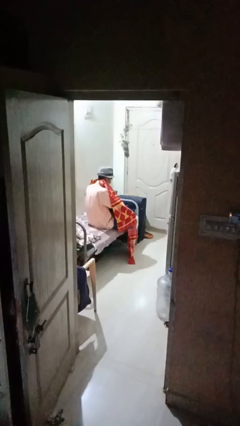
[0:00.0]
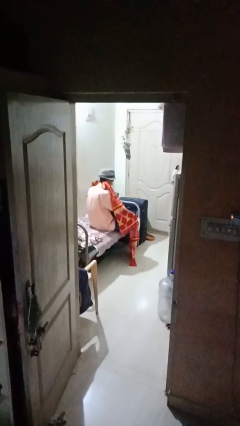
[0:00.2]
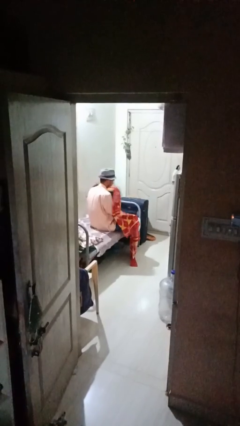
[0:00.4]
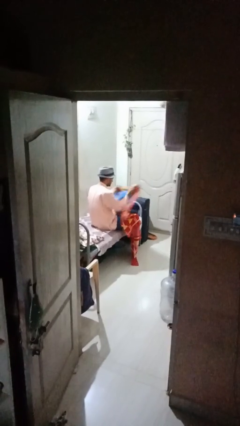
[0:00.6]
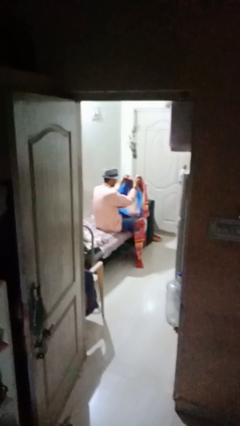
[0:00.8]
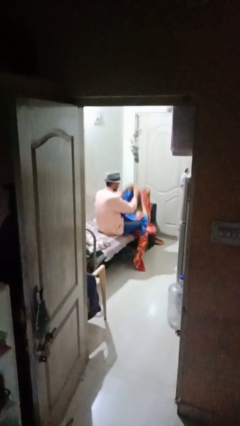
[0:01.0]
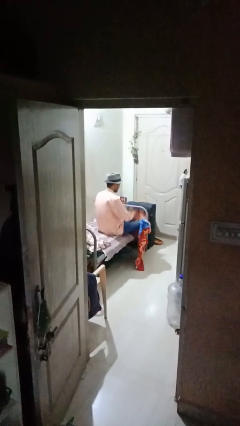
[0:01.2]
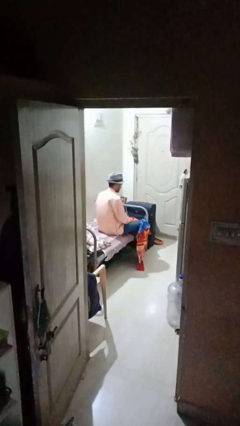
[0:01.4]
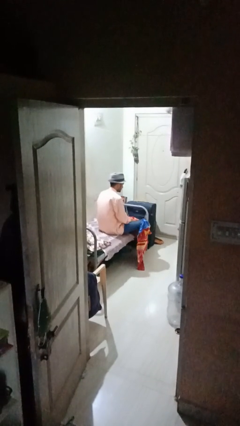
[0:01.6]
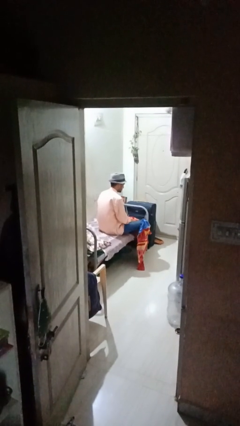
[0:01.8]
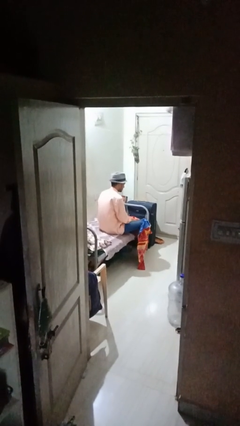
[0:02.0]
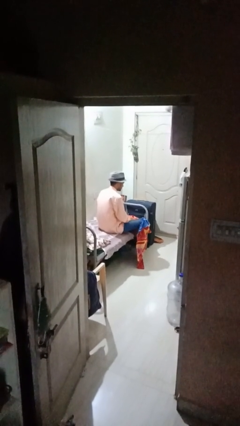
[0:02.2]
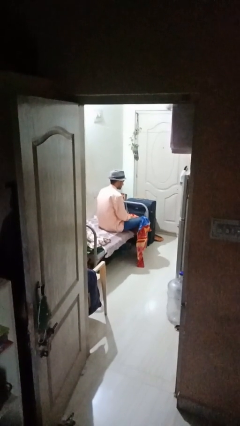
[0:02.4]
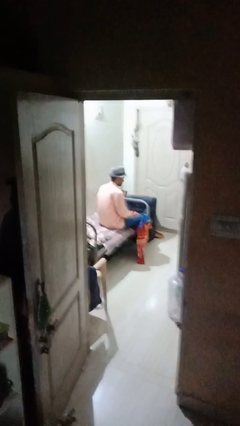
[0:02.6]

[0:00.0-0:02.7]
person uncovers with blanket

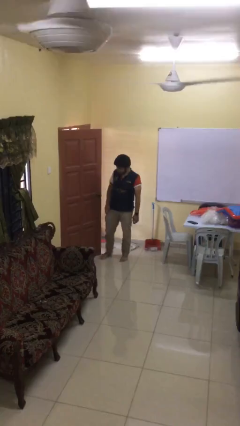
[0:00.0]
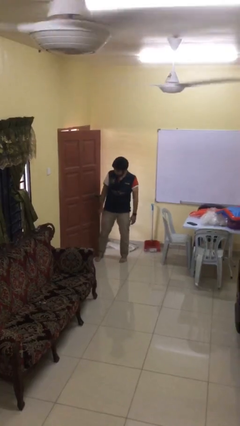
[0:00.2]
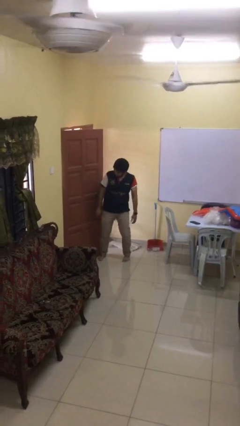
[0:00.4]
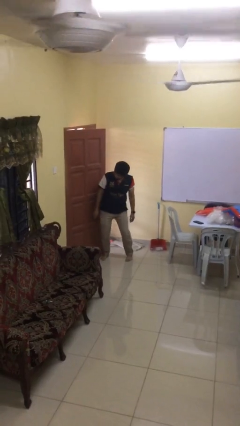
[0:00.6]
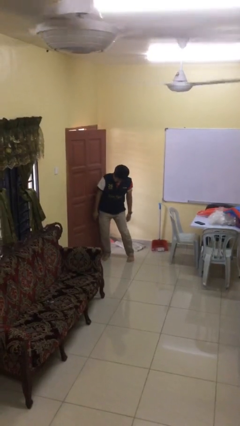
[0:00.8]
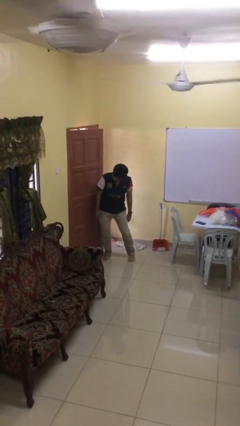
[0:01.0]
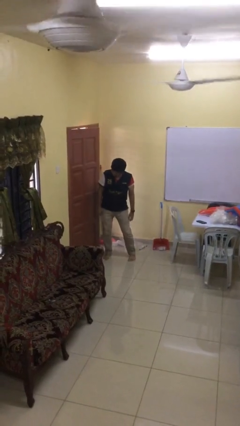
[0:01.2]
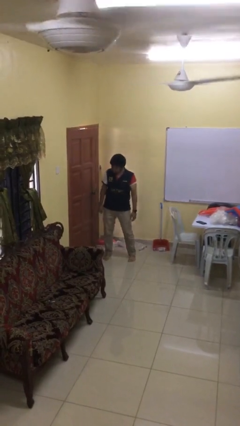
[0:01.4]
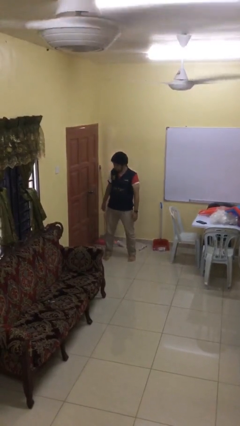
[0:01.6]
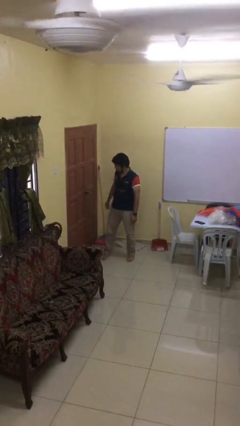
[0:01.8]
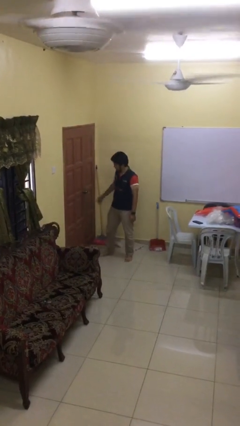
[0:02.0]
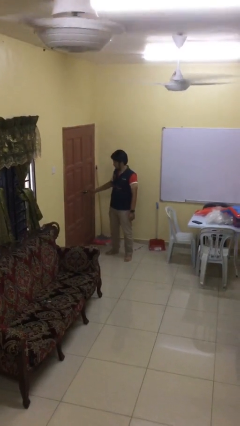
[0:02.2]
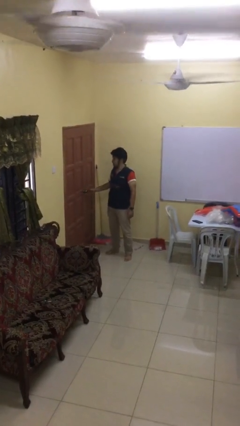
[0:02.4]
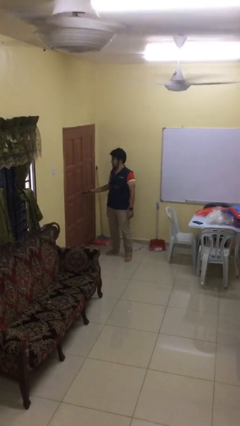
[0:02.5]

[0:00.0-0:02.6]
person closes door with hip

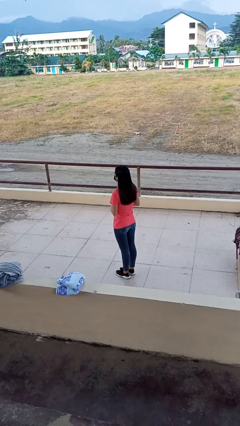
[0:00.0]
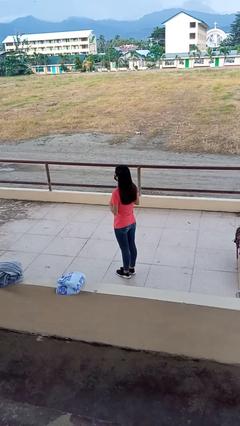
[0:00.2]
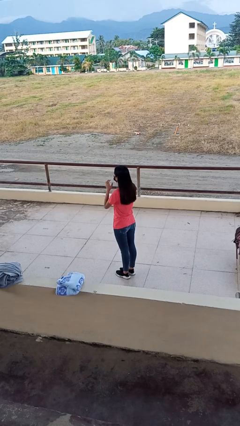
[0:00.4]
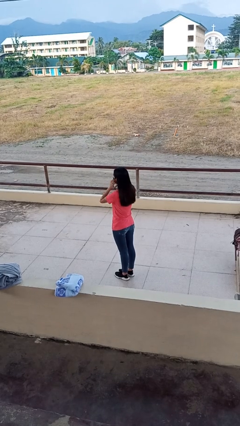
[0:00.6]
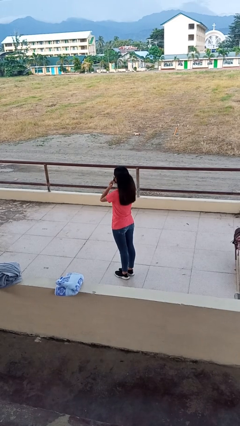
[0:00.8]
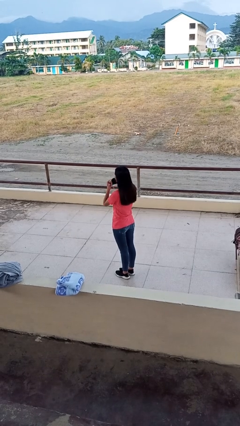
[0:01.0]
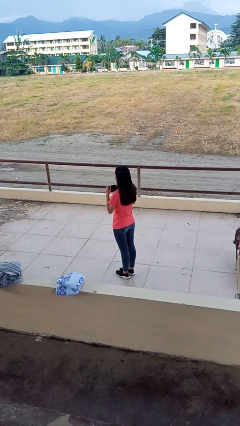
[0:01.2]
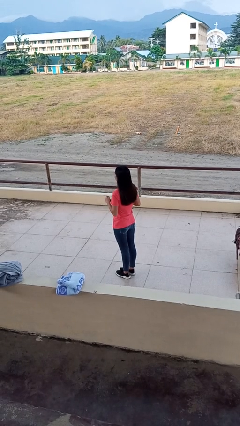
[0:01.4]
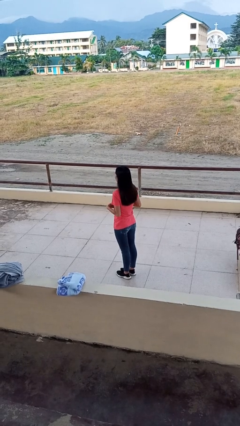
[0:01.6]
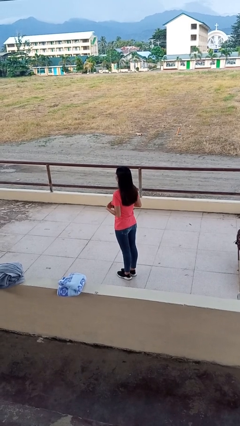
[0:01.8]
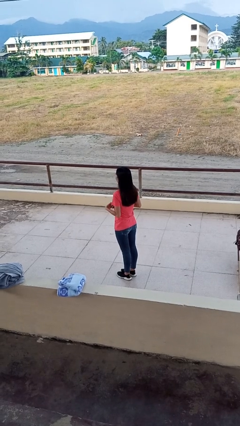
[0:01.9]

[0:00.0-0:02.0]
person takes off facemask

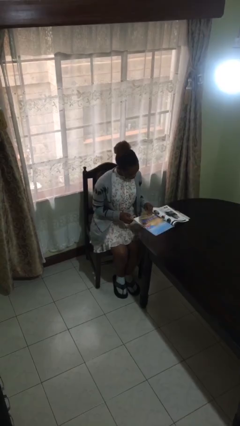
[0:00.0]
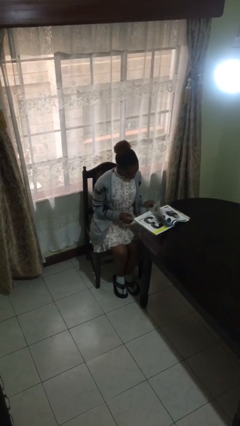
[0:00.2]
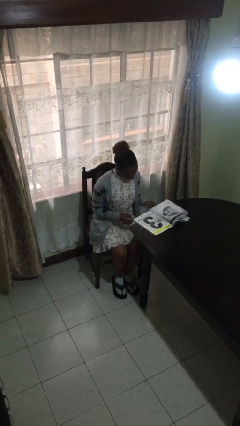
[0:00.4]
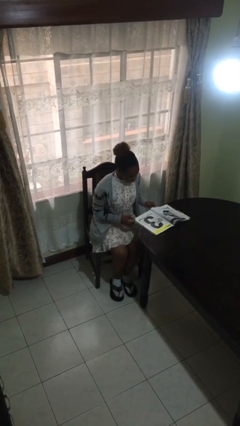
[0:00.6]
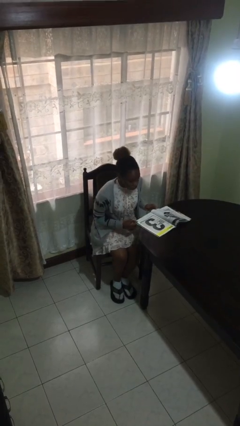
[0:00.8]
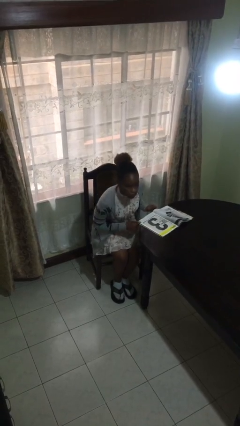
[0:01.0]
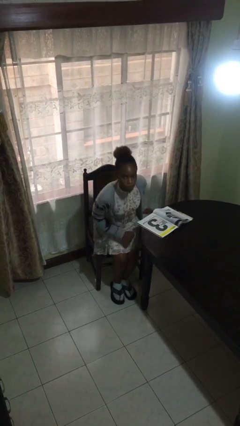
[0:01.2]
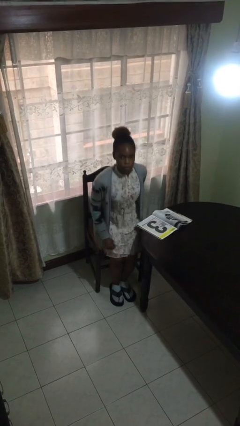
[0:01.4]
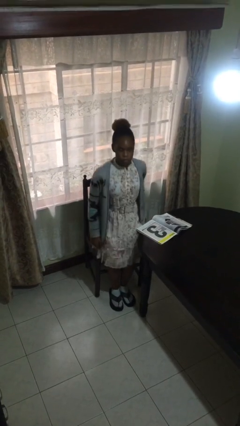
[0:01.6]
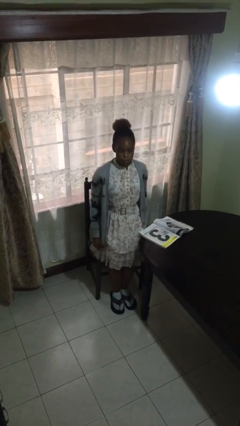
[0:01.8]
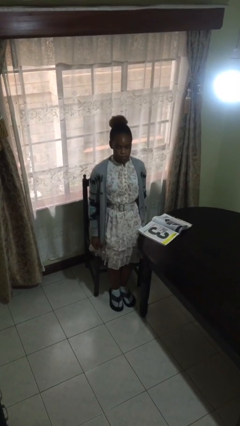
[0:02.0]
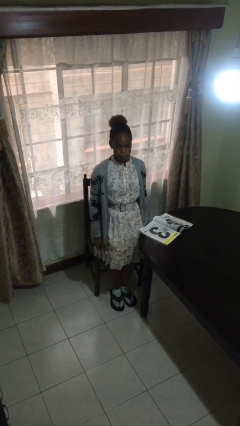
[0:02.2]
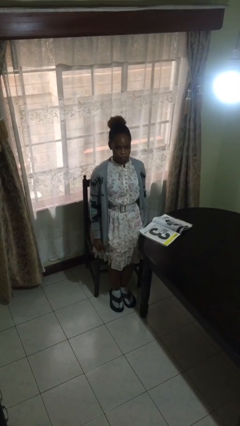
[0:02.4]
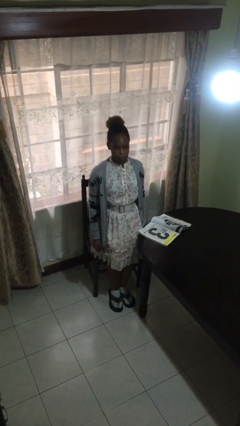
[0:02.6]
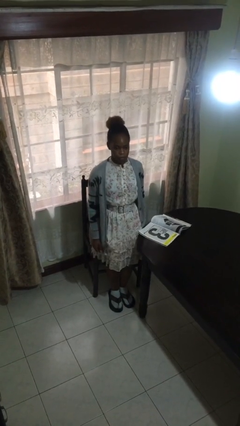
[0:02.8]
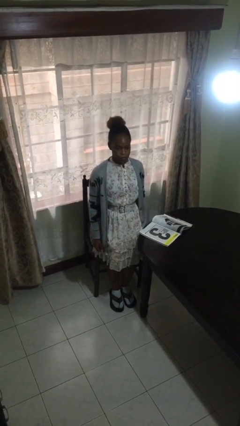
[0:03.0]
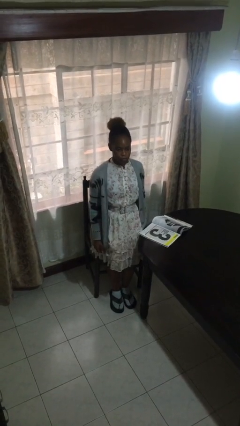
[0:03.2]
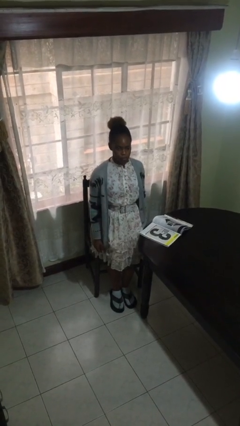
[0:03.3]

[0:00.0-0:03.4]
person stands up

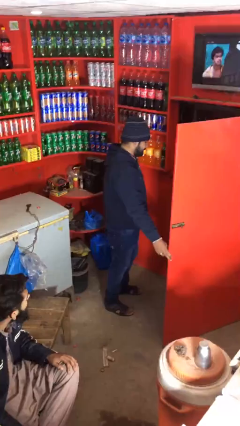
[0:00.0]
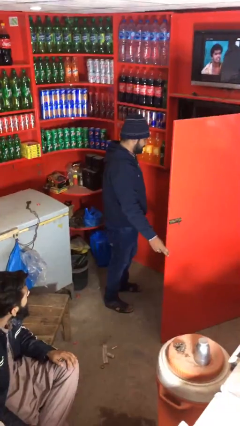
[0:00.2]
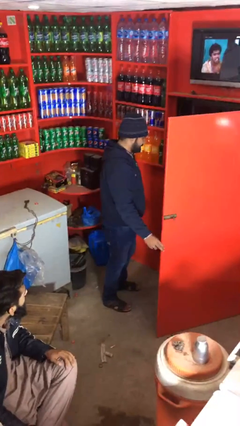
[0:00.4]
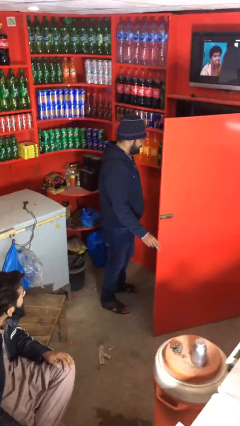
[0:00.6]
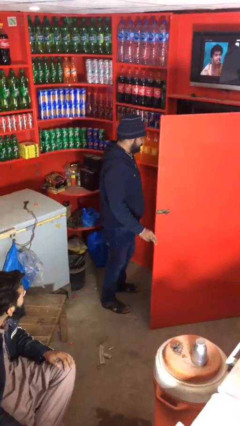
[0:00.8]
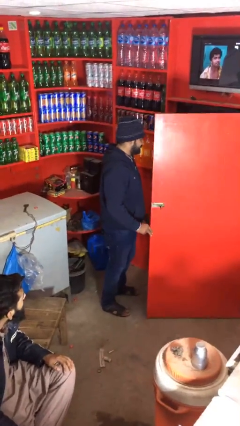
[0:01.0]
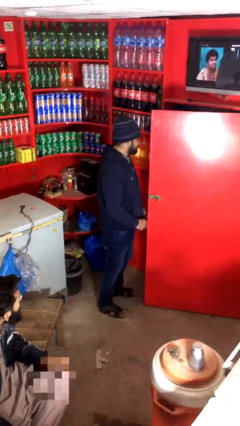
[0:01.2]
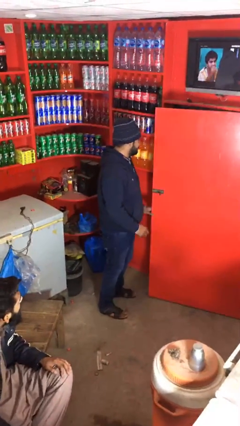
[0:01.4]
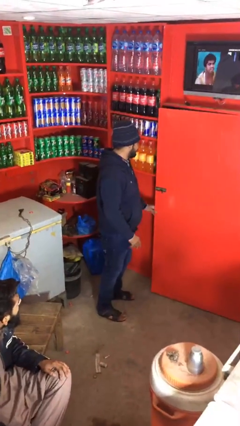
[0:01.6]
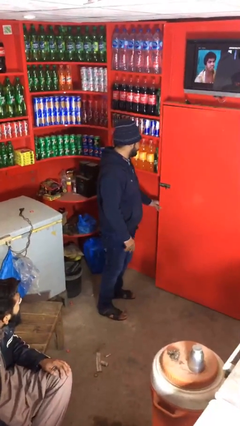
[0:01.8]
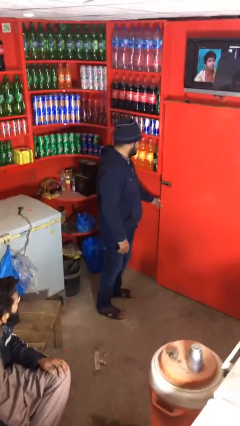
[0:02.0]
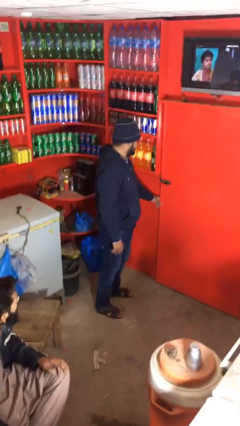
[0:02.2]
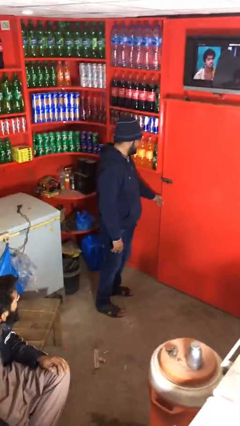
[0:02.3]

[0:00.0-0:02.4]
person closes facility door

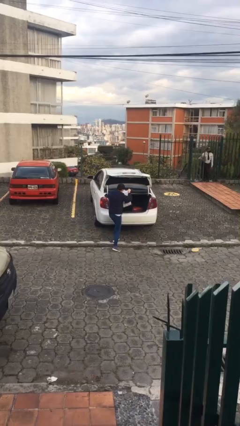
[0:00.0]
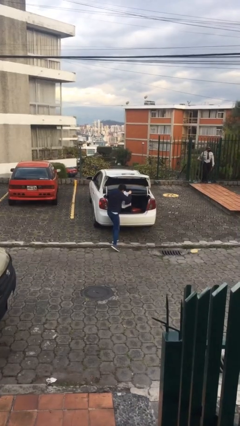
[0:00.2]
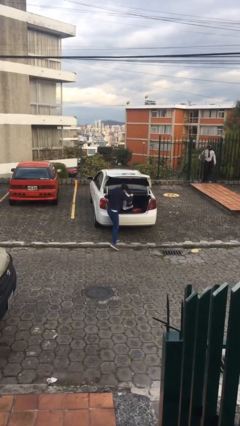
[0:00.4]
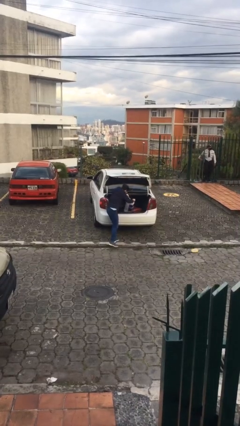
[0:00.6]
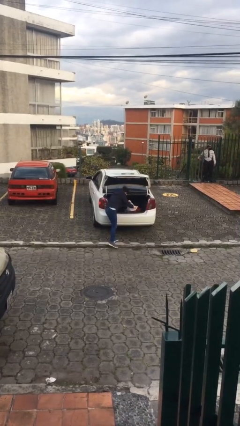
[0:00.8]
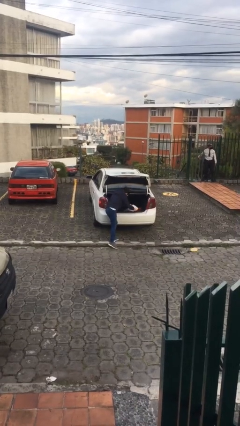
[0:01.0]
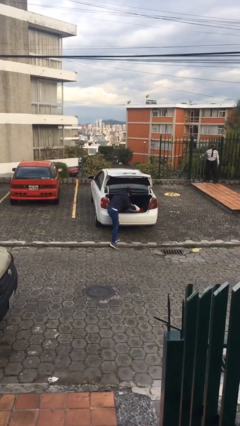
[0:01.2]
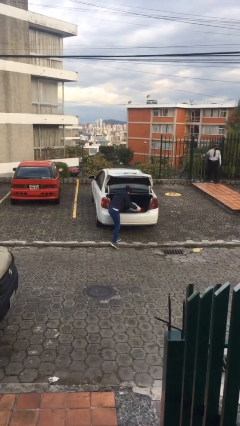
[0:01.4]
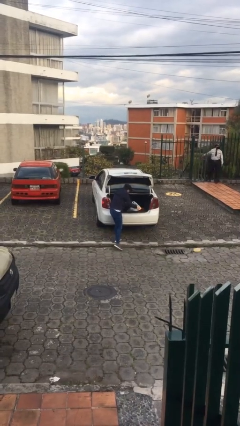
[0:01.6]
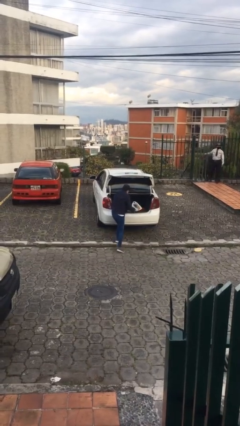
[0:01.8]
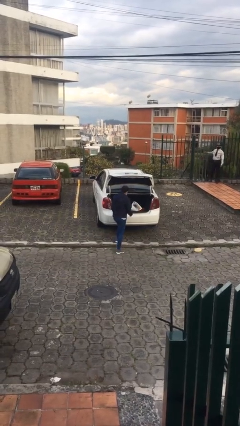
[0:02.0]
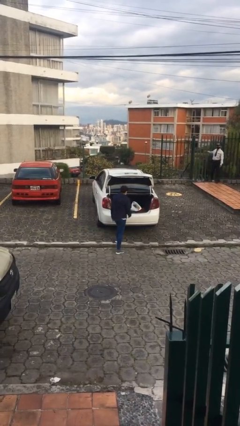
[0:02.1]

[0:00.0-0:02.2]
person loads car

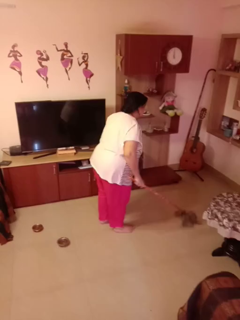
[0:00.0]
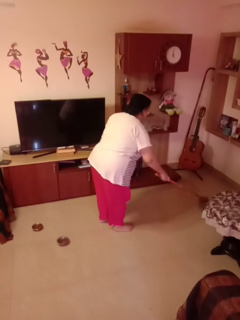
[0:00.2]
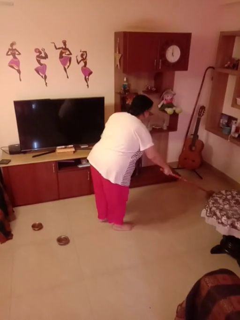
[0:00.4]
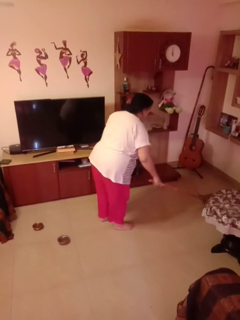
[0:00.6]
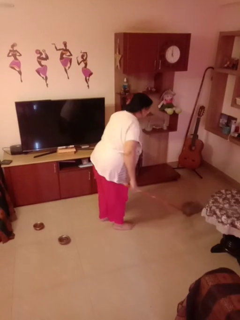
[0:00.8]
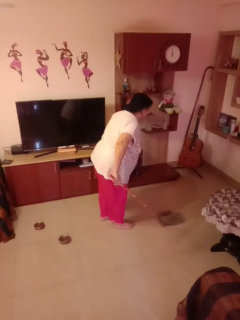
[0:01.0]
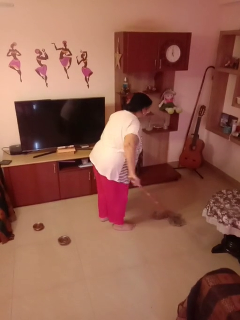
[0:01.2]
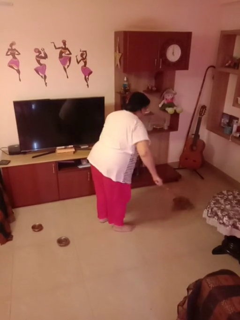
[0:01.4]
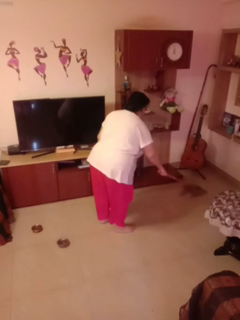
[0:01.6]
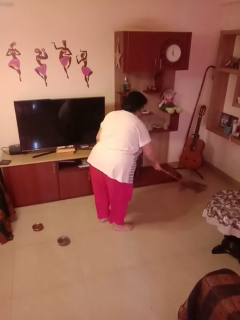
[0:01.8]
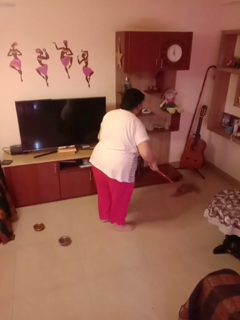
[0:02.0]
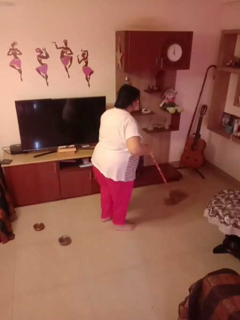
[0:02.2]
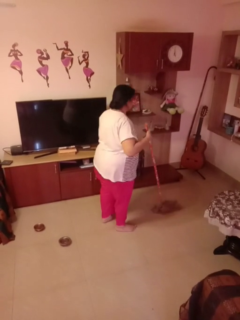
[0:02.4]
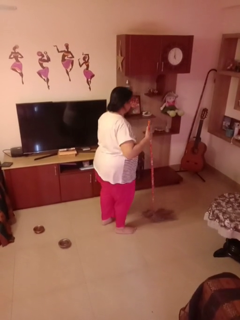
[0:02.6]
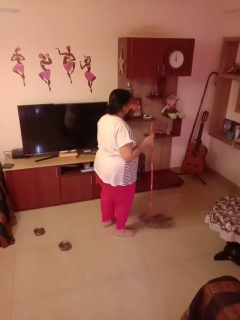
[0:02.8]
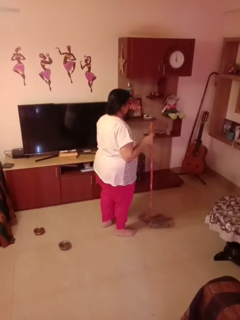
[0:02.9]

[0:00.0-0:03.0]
person mops
